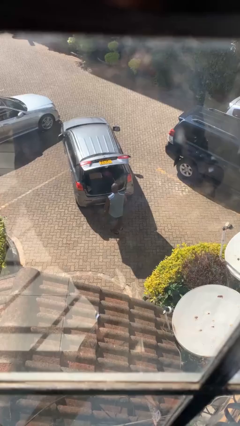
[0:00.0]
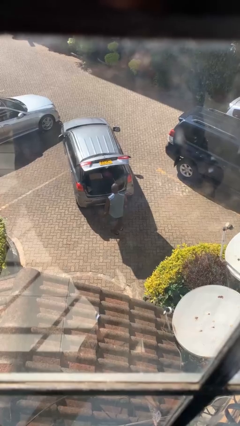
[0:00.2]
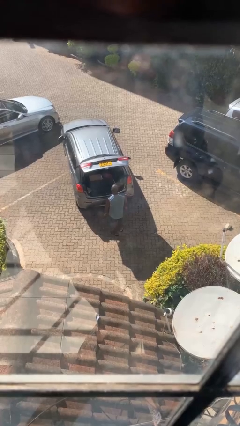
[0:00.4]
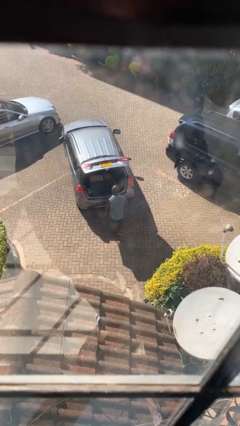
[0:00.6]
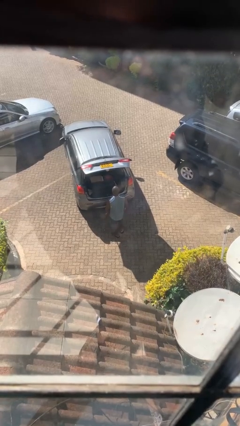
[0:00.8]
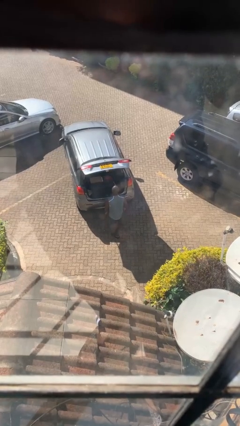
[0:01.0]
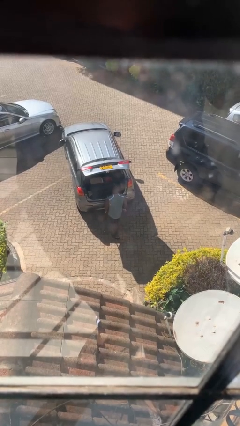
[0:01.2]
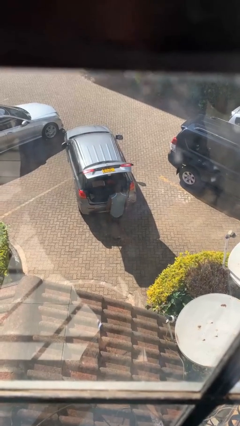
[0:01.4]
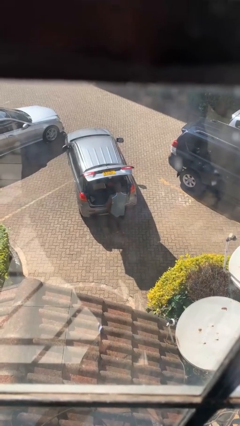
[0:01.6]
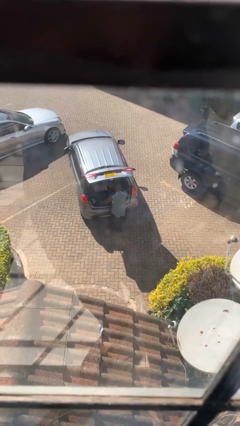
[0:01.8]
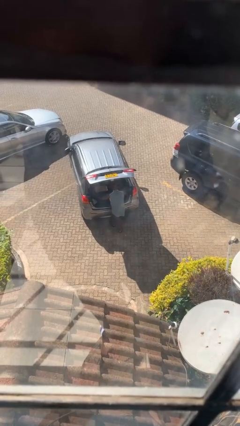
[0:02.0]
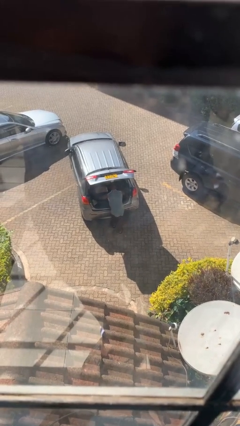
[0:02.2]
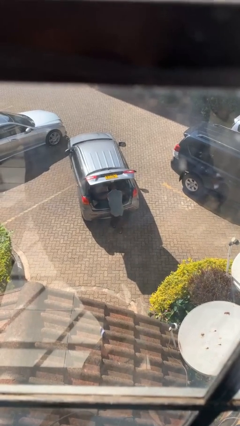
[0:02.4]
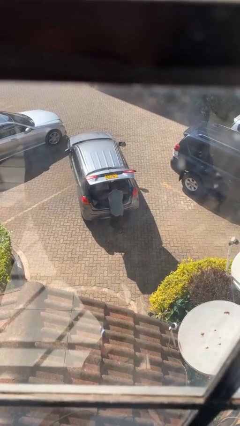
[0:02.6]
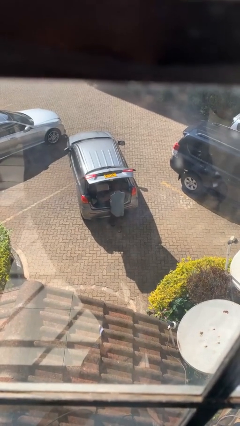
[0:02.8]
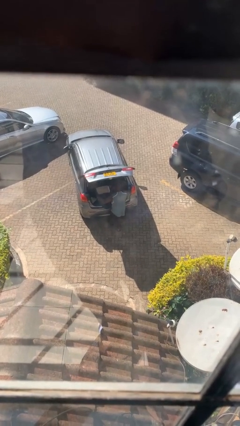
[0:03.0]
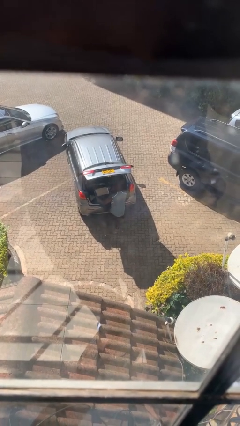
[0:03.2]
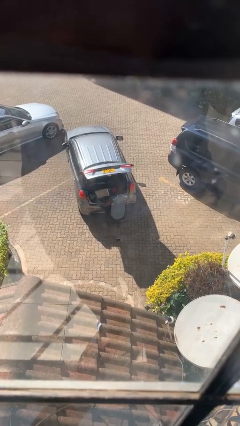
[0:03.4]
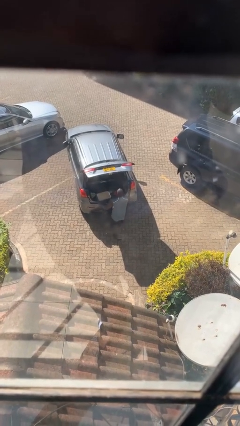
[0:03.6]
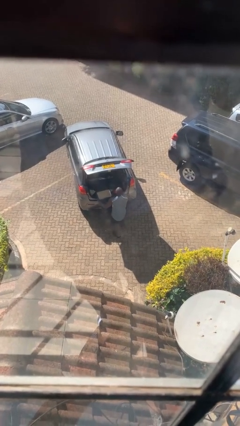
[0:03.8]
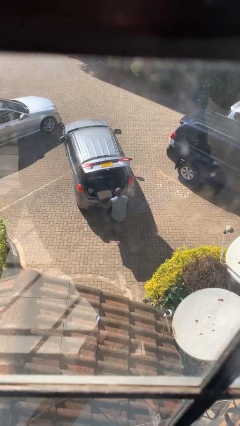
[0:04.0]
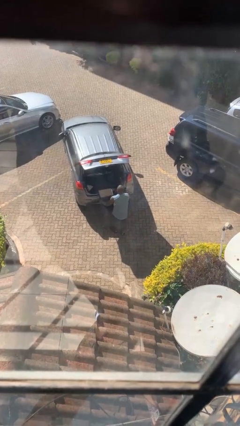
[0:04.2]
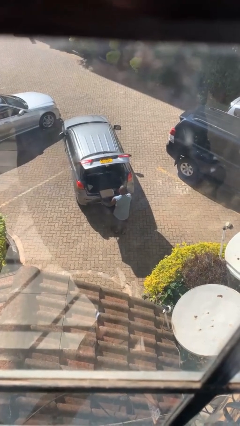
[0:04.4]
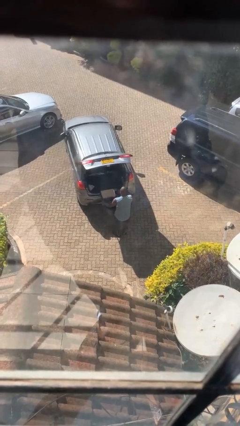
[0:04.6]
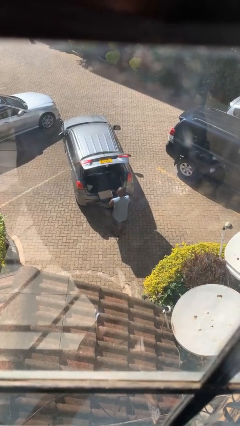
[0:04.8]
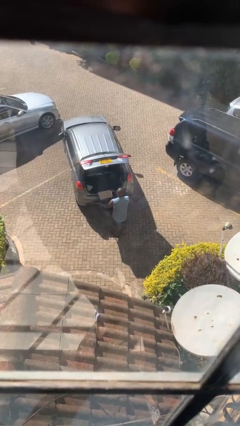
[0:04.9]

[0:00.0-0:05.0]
person unloads car

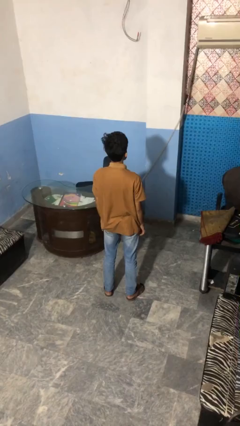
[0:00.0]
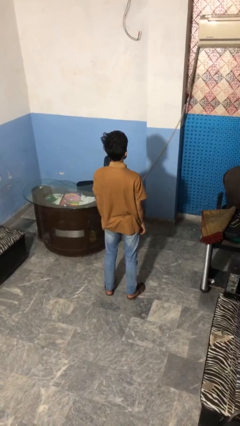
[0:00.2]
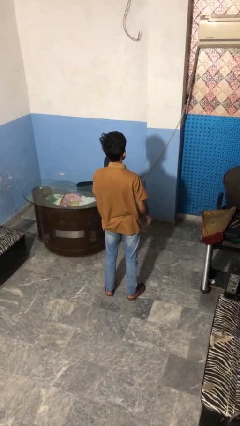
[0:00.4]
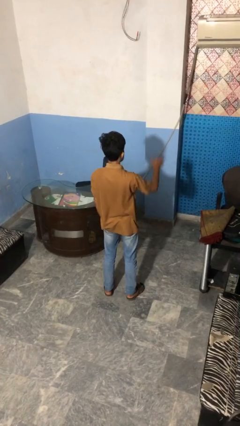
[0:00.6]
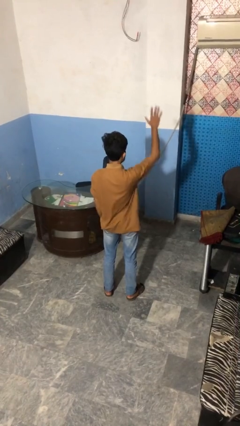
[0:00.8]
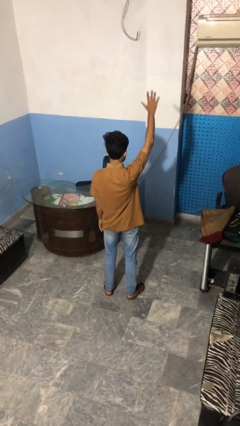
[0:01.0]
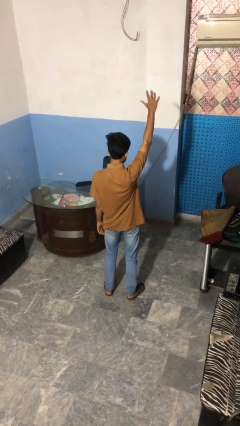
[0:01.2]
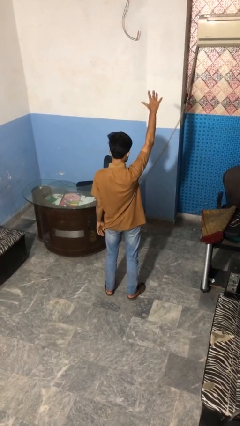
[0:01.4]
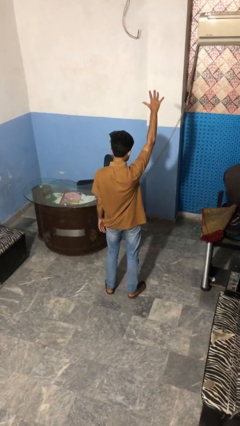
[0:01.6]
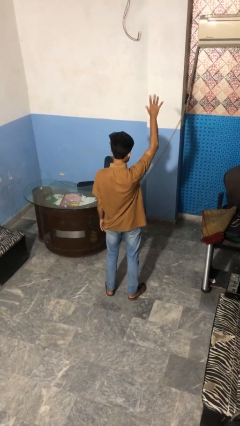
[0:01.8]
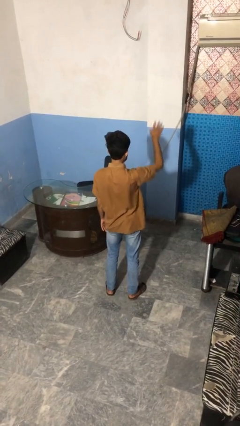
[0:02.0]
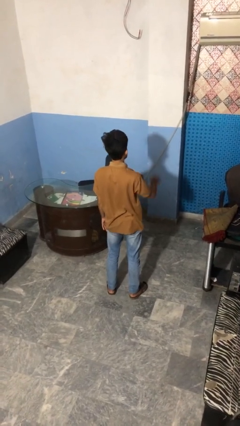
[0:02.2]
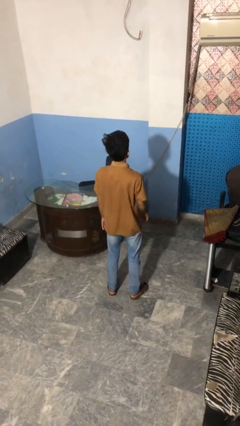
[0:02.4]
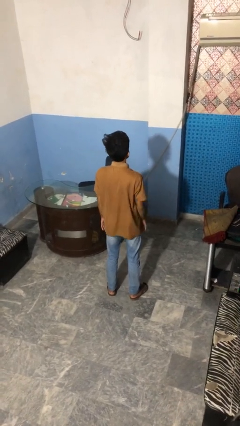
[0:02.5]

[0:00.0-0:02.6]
person gestures number five

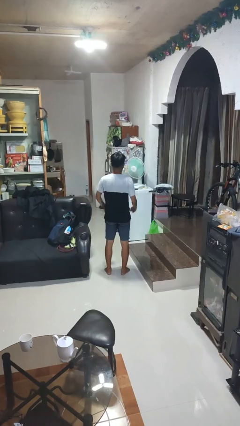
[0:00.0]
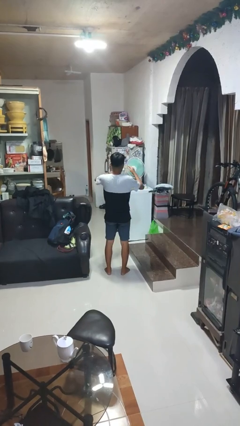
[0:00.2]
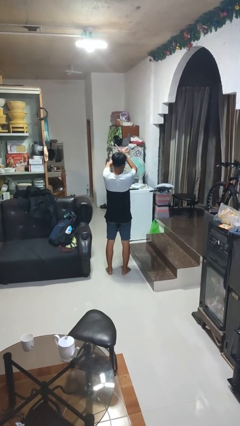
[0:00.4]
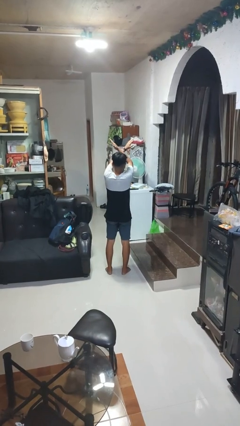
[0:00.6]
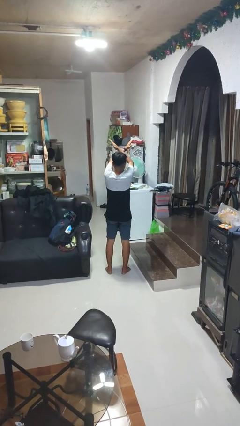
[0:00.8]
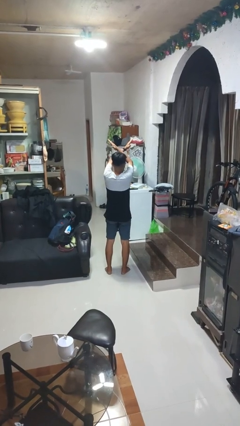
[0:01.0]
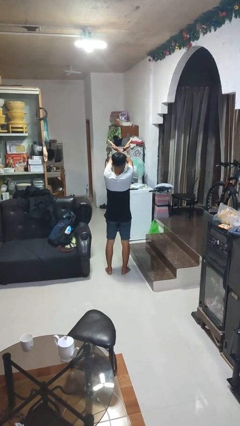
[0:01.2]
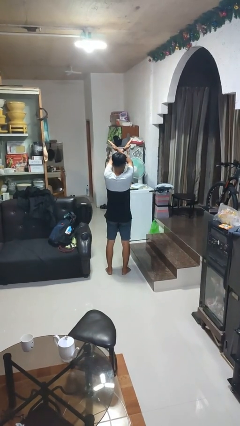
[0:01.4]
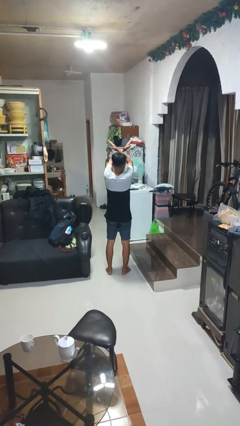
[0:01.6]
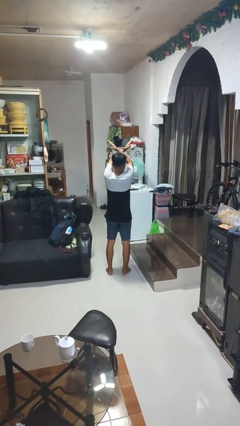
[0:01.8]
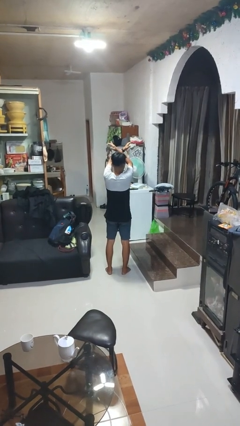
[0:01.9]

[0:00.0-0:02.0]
person gestures arms x

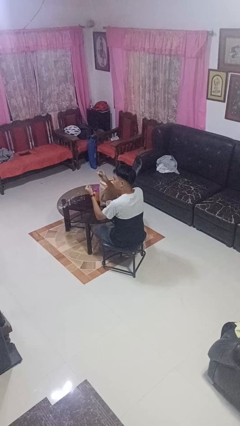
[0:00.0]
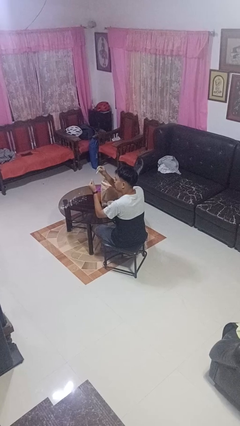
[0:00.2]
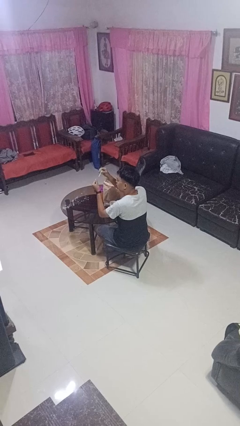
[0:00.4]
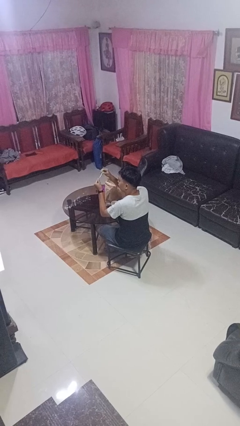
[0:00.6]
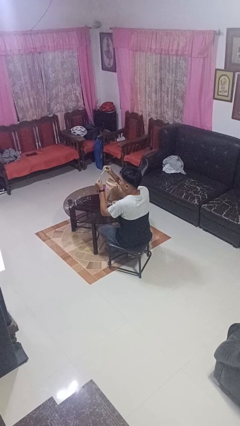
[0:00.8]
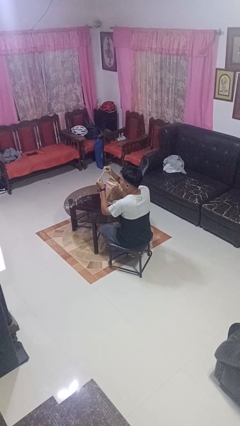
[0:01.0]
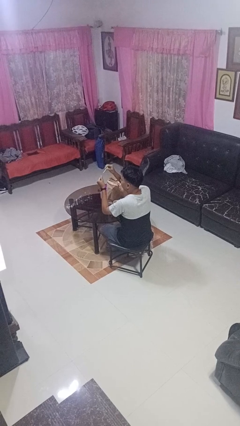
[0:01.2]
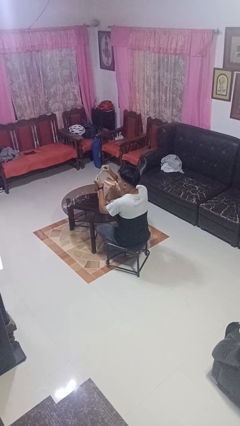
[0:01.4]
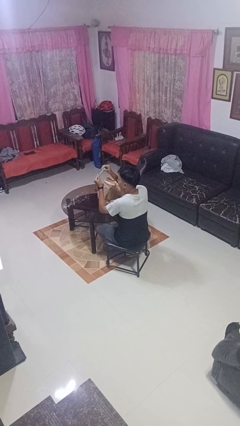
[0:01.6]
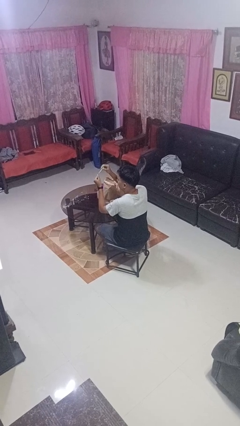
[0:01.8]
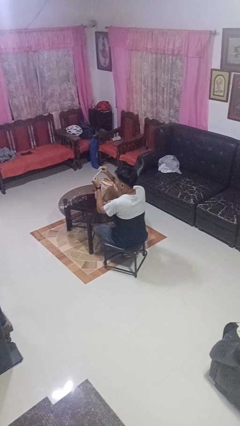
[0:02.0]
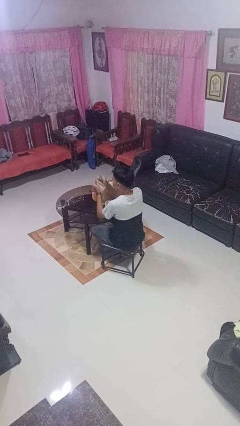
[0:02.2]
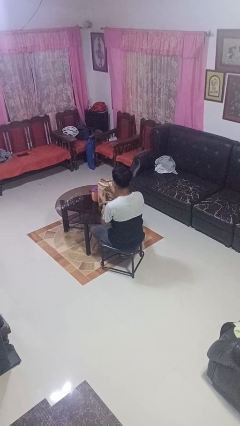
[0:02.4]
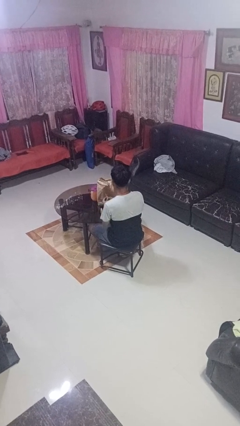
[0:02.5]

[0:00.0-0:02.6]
person paints fingernails

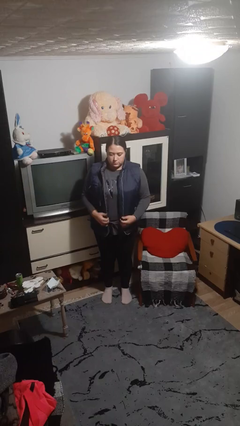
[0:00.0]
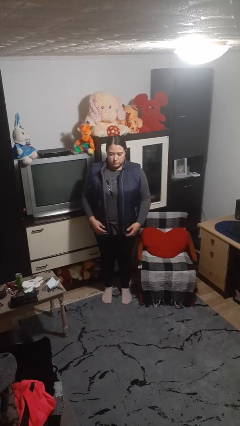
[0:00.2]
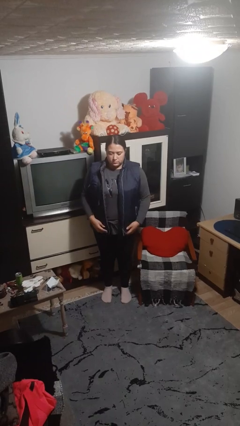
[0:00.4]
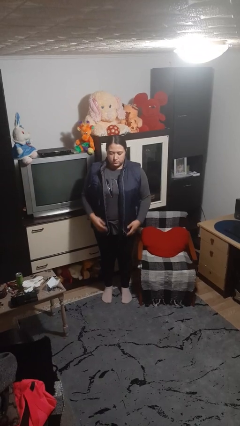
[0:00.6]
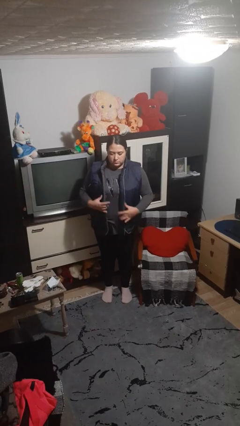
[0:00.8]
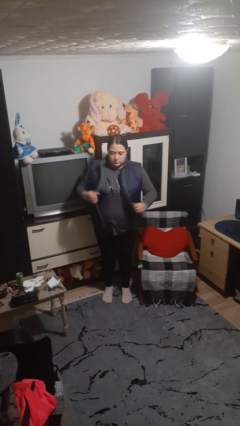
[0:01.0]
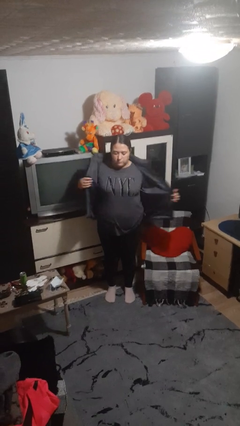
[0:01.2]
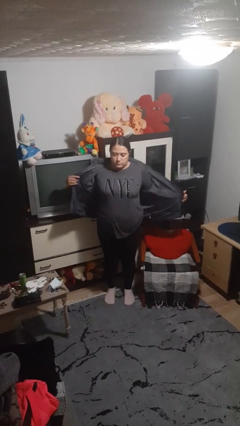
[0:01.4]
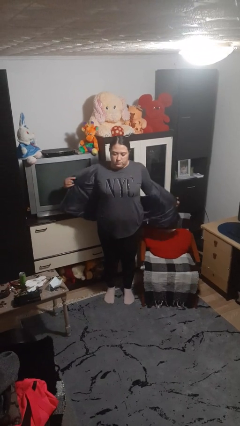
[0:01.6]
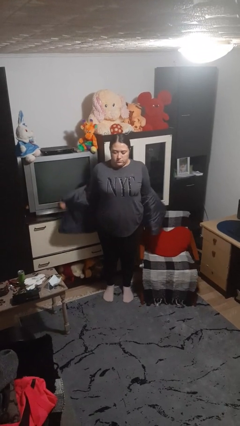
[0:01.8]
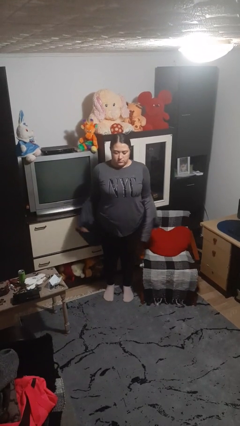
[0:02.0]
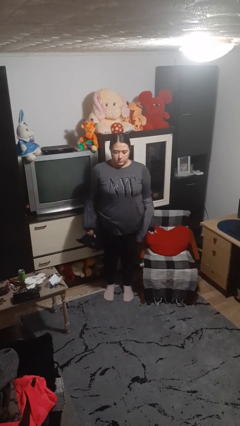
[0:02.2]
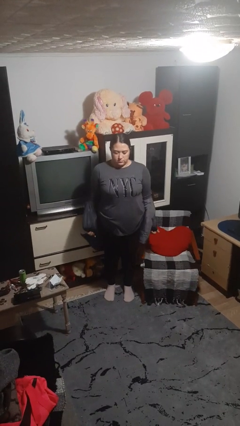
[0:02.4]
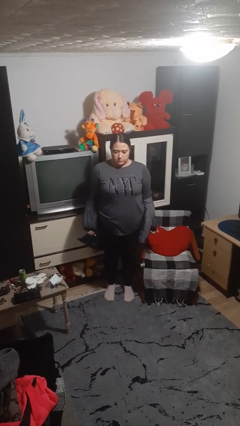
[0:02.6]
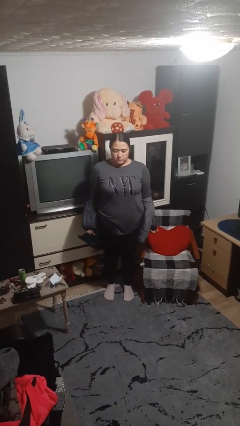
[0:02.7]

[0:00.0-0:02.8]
person takes off jacket

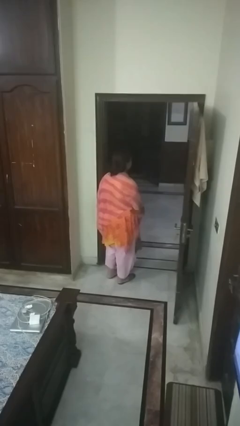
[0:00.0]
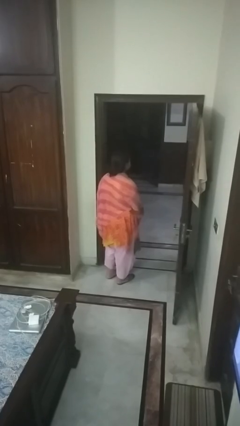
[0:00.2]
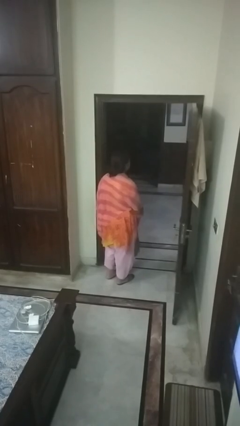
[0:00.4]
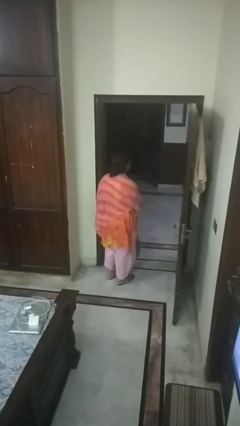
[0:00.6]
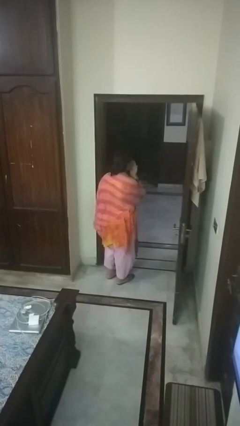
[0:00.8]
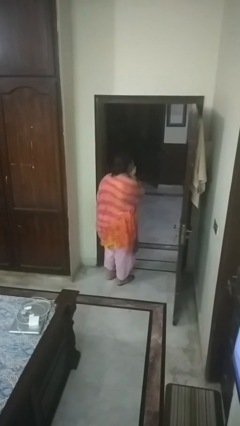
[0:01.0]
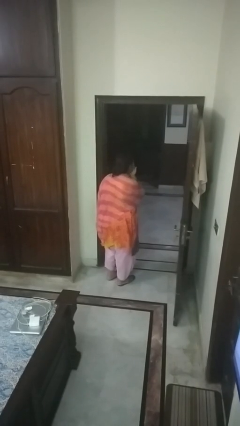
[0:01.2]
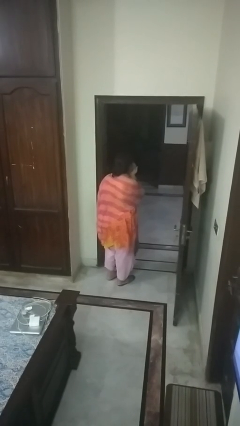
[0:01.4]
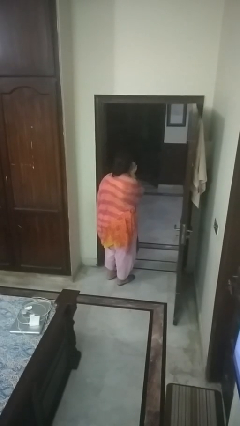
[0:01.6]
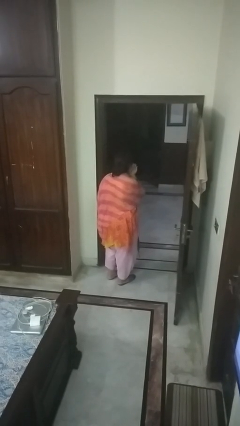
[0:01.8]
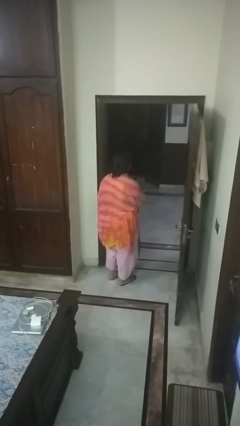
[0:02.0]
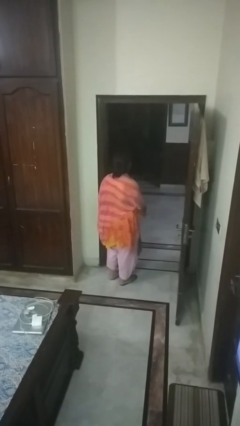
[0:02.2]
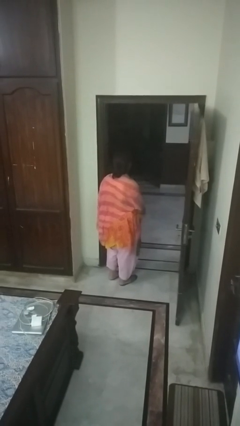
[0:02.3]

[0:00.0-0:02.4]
person gestures blow kiss
